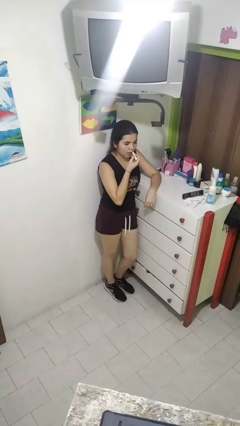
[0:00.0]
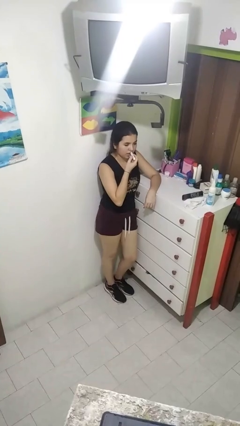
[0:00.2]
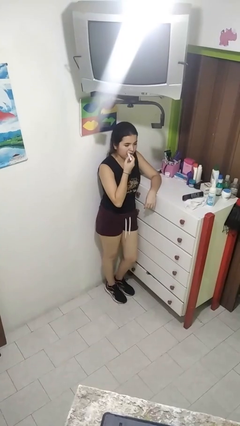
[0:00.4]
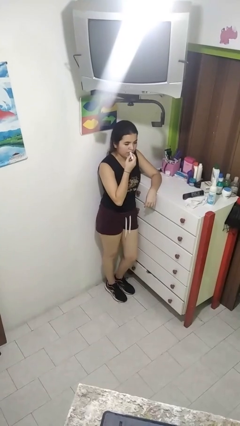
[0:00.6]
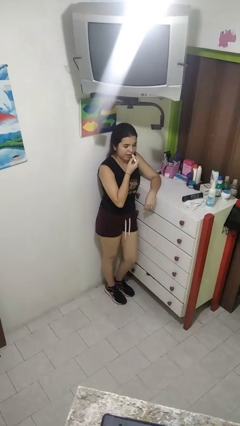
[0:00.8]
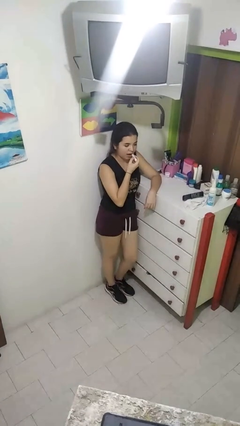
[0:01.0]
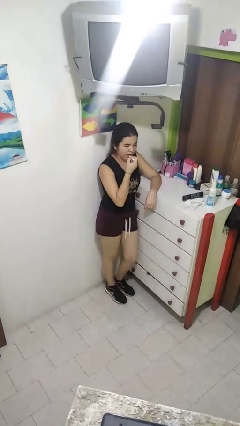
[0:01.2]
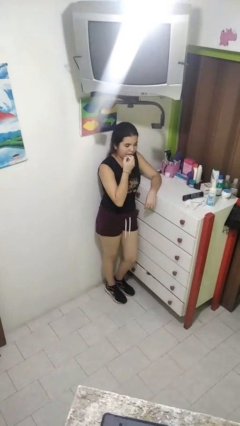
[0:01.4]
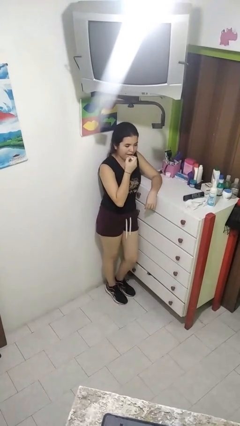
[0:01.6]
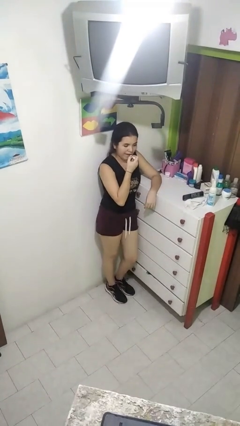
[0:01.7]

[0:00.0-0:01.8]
person applies lip makeup

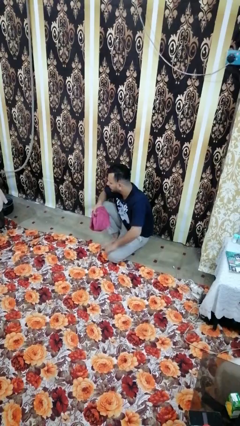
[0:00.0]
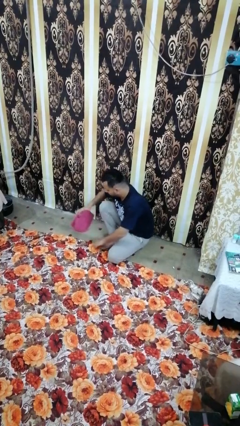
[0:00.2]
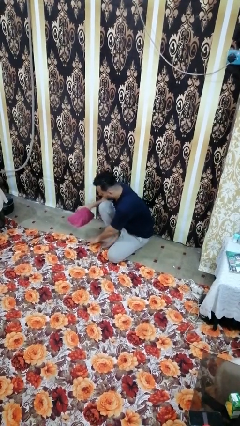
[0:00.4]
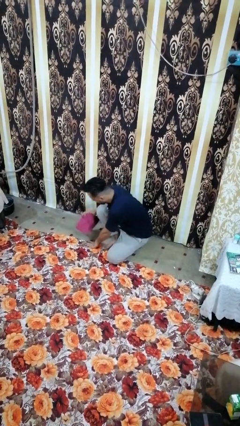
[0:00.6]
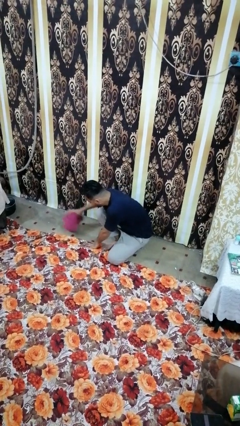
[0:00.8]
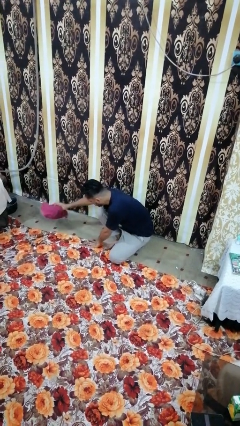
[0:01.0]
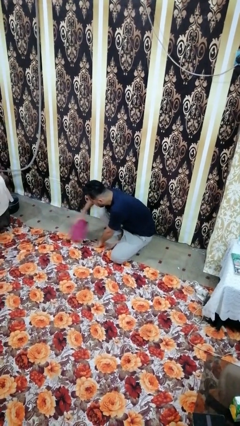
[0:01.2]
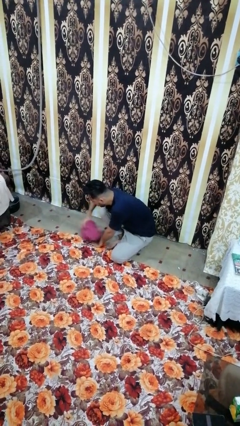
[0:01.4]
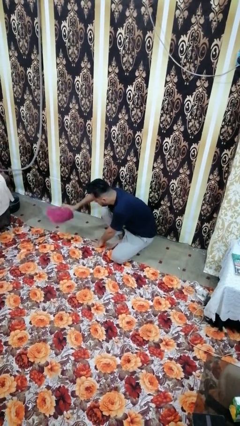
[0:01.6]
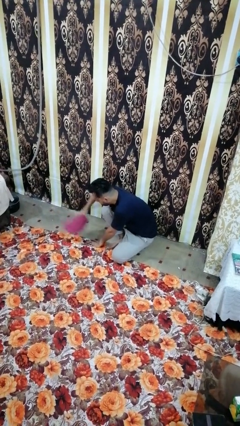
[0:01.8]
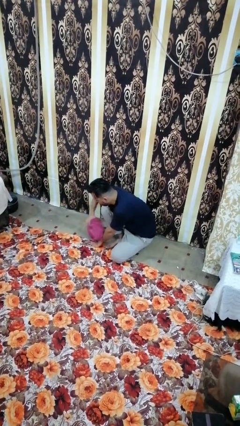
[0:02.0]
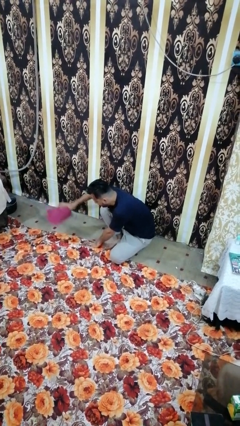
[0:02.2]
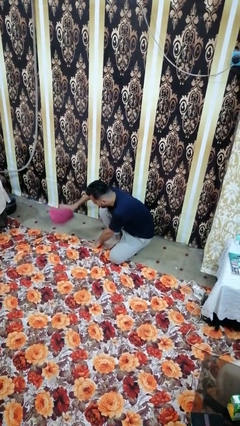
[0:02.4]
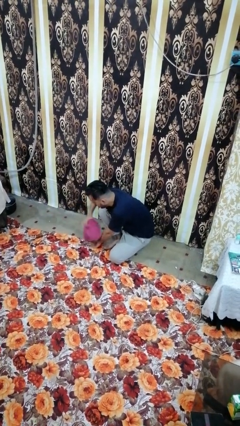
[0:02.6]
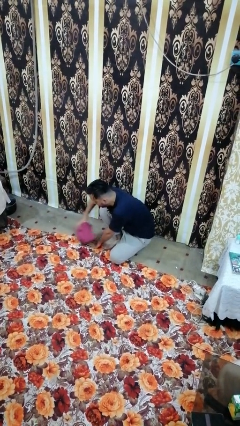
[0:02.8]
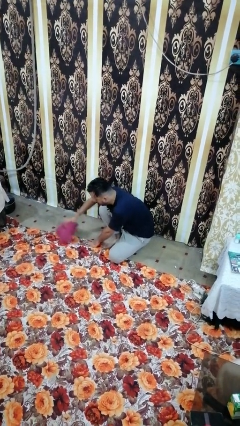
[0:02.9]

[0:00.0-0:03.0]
person mops

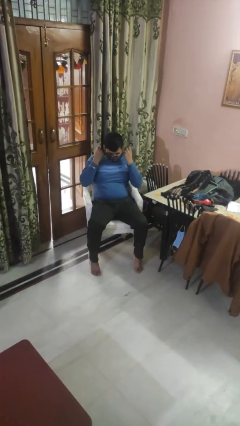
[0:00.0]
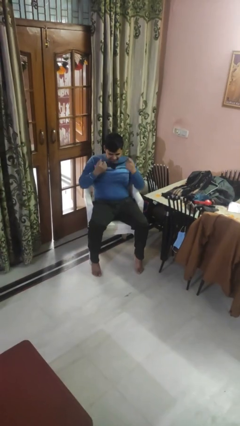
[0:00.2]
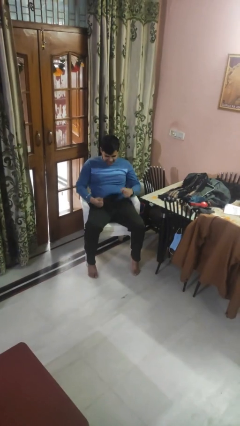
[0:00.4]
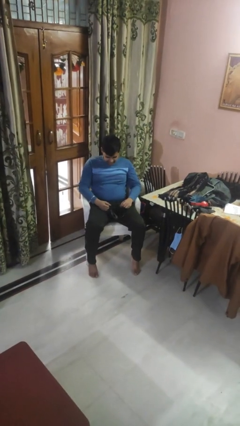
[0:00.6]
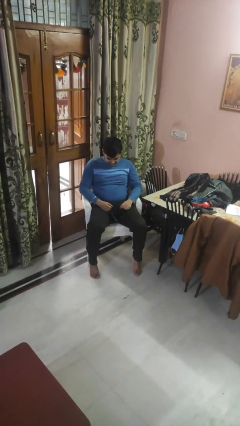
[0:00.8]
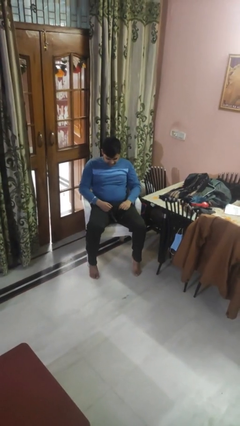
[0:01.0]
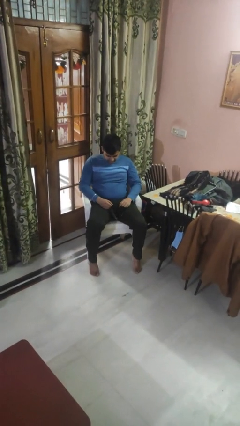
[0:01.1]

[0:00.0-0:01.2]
person takes off facemask

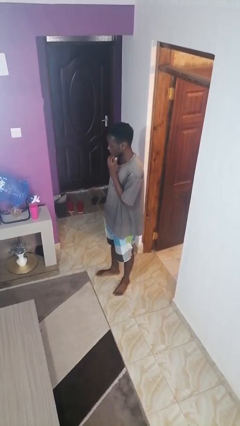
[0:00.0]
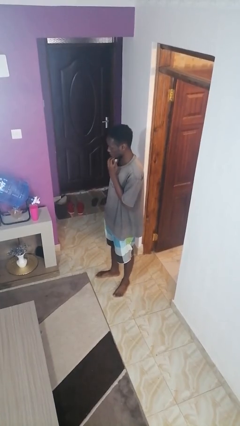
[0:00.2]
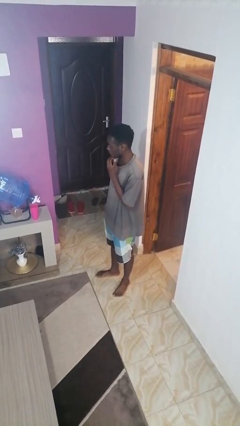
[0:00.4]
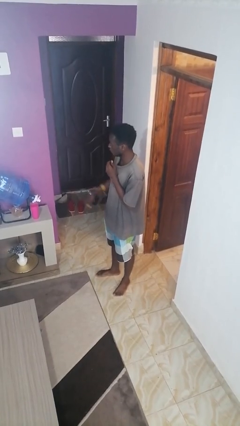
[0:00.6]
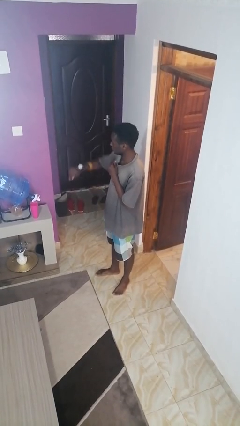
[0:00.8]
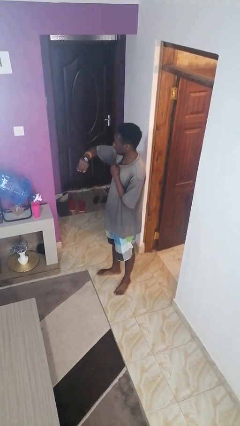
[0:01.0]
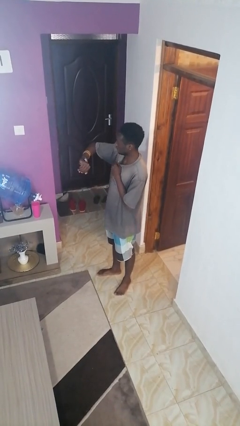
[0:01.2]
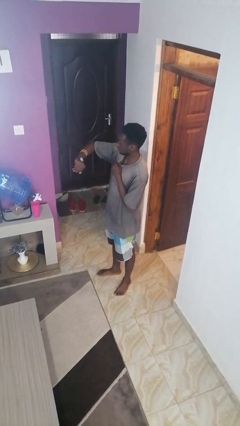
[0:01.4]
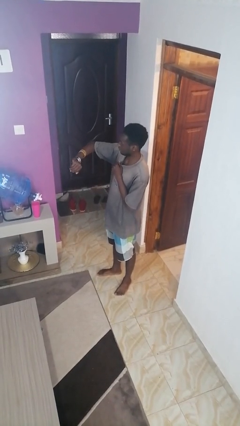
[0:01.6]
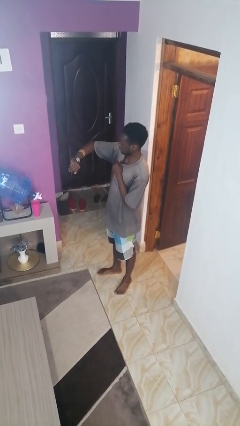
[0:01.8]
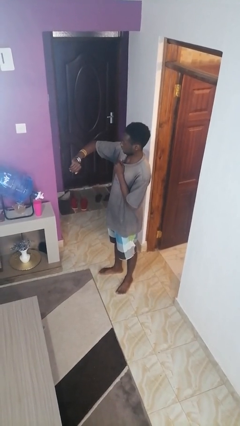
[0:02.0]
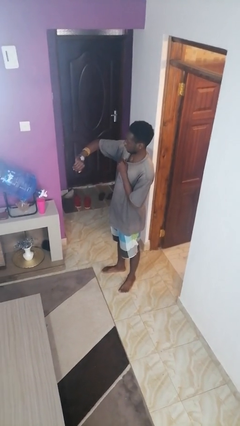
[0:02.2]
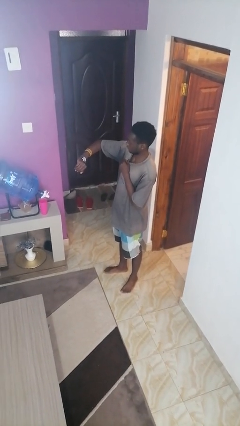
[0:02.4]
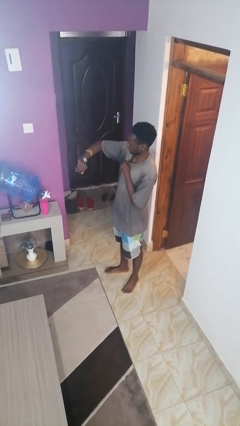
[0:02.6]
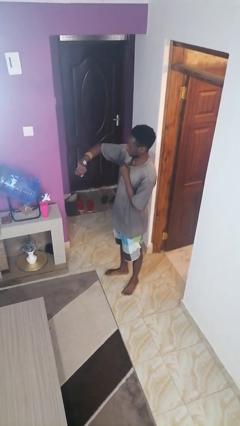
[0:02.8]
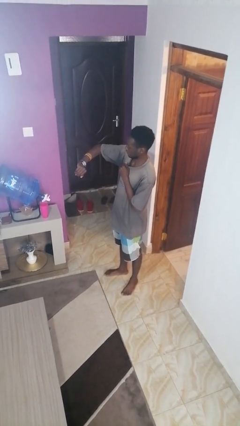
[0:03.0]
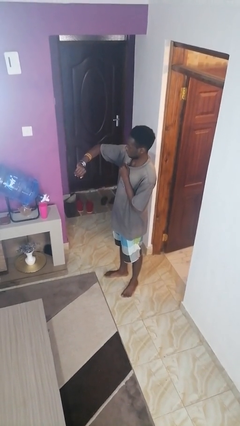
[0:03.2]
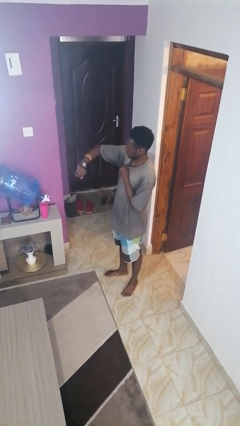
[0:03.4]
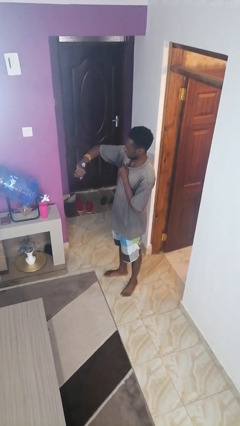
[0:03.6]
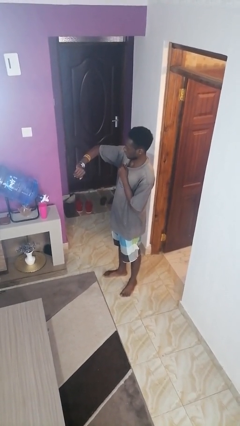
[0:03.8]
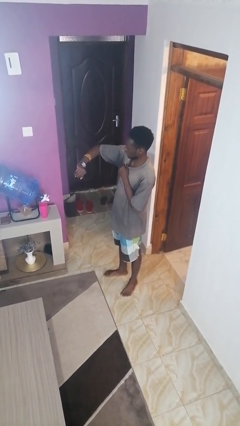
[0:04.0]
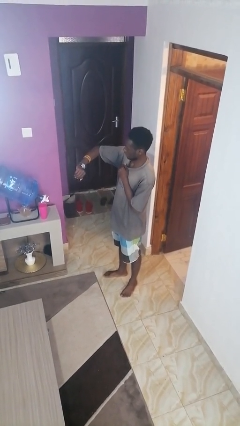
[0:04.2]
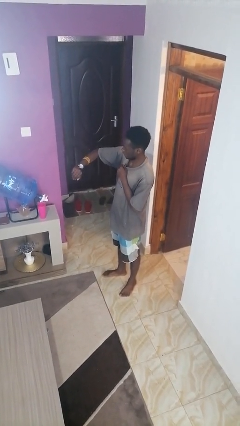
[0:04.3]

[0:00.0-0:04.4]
person looks at wristwatch

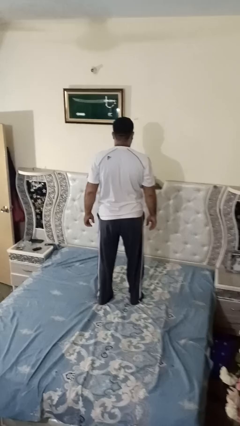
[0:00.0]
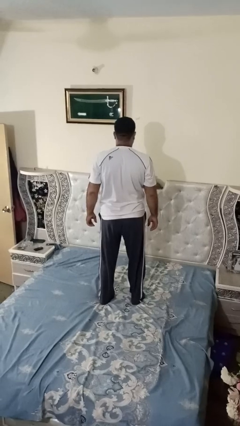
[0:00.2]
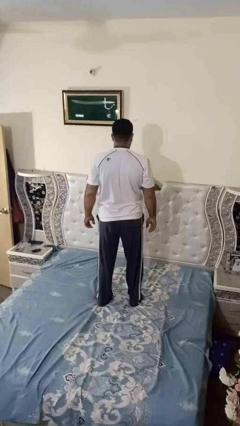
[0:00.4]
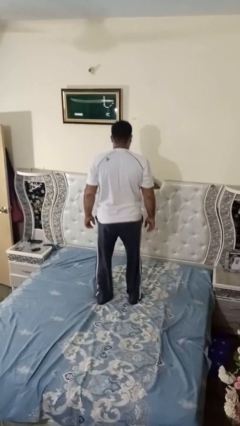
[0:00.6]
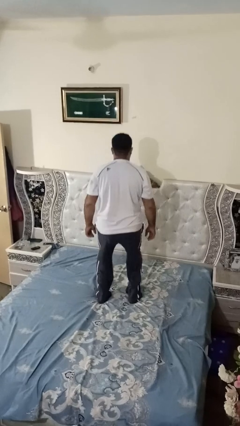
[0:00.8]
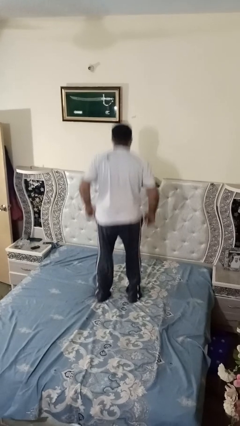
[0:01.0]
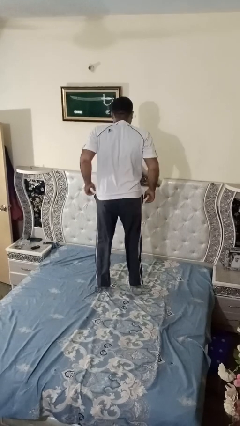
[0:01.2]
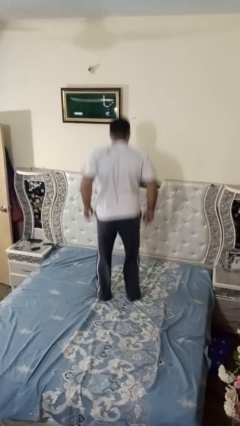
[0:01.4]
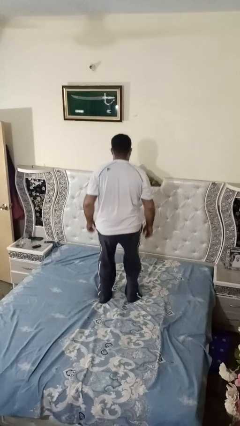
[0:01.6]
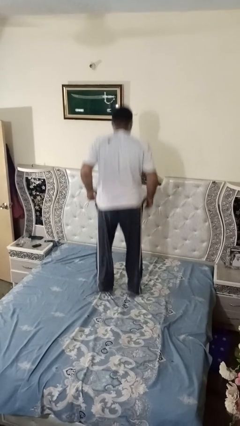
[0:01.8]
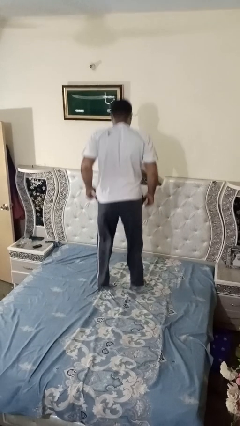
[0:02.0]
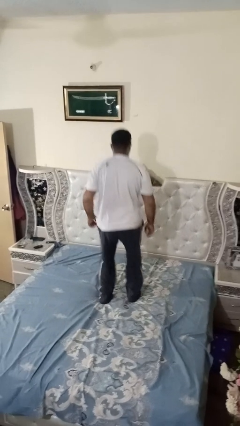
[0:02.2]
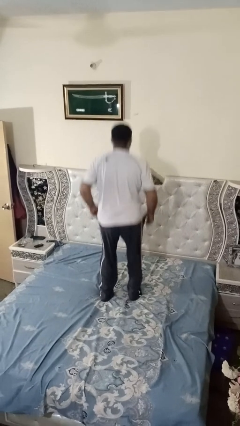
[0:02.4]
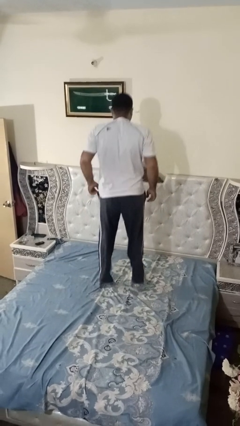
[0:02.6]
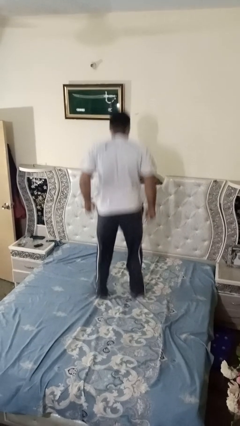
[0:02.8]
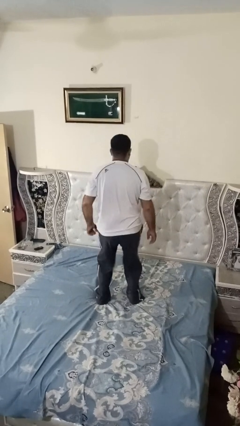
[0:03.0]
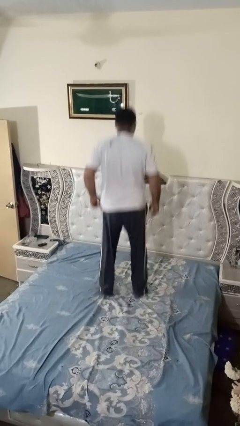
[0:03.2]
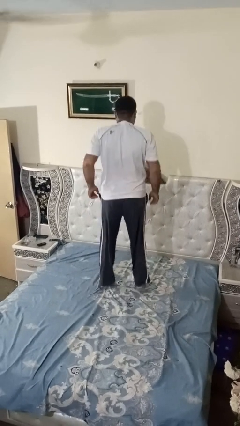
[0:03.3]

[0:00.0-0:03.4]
person jumps on bed

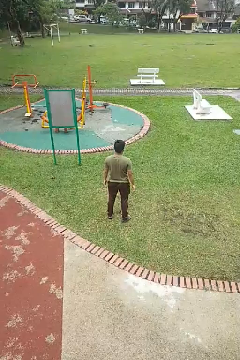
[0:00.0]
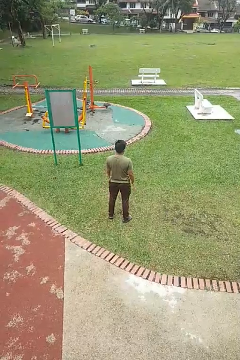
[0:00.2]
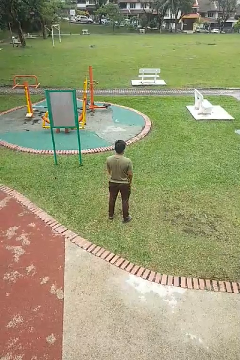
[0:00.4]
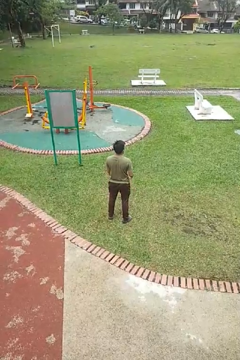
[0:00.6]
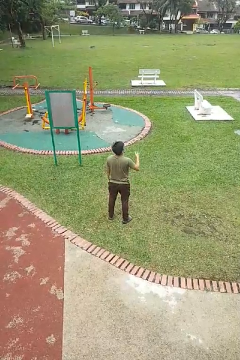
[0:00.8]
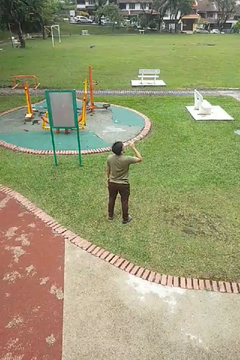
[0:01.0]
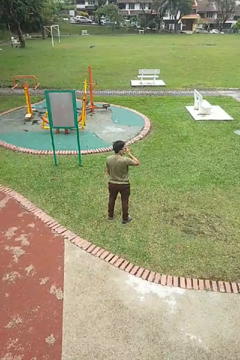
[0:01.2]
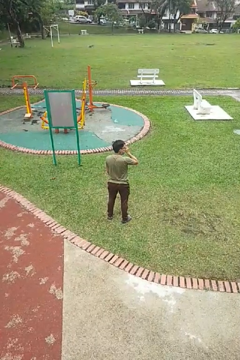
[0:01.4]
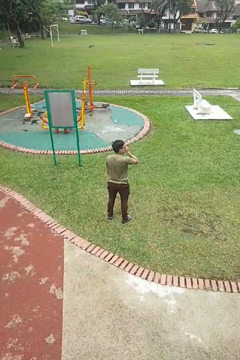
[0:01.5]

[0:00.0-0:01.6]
person sneezes into hand

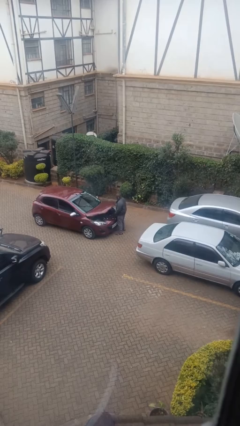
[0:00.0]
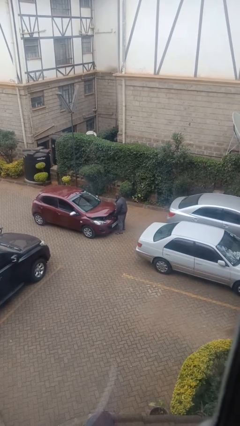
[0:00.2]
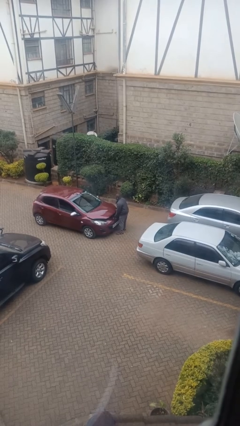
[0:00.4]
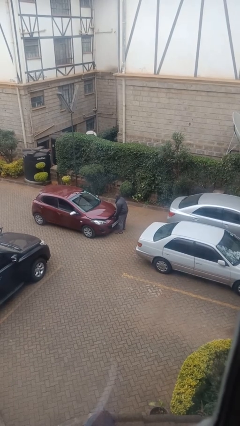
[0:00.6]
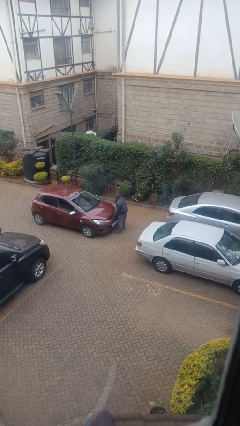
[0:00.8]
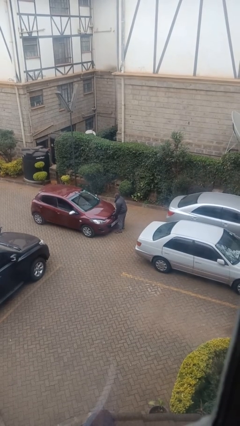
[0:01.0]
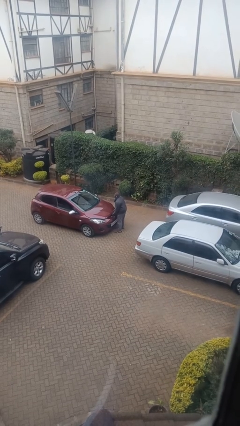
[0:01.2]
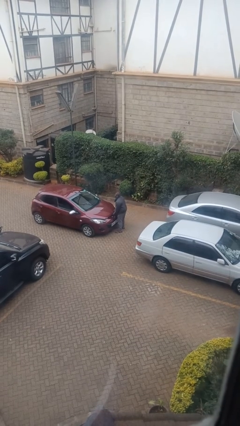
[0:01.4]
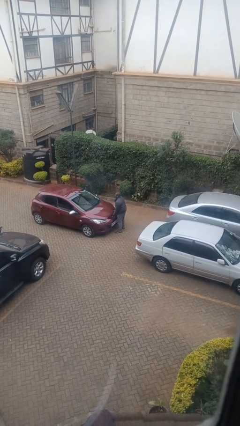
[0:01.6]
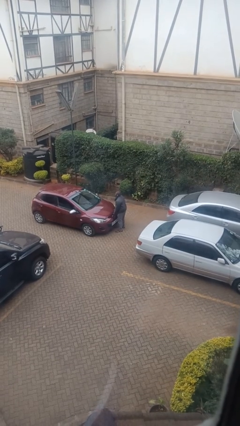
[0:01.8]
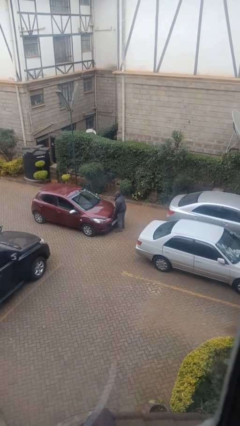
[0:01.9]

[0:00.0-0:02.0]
person closes car hood
